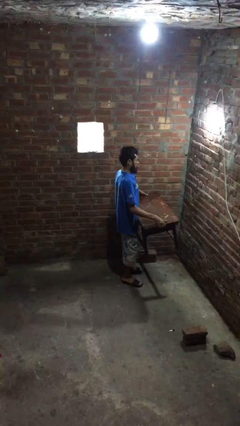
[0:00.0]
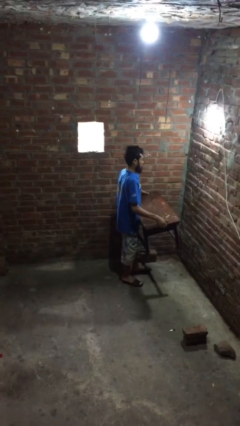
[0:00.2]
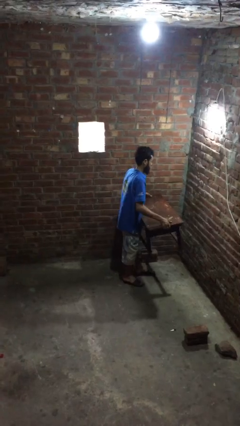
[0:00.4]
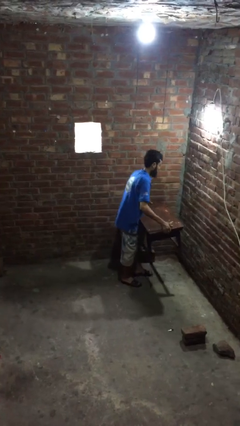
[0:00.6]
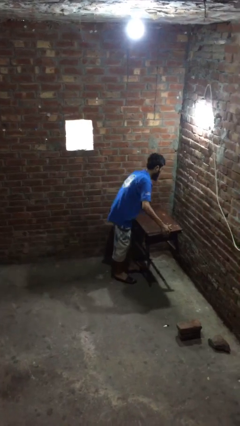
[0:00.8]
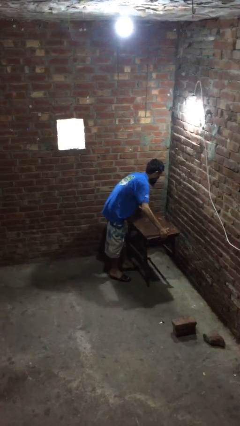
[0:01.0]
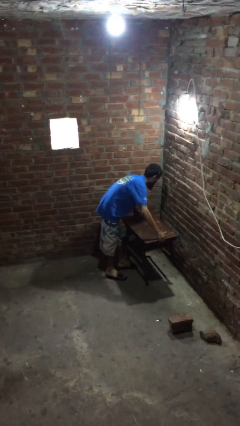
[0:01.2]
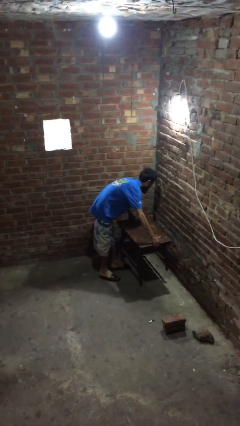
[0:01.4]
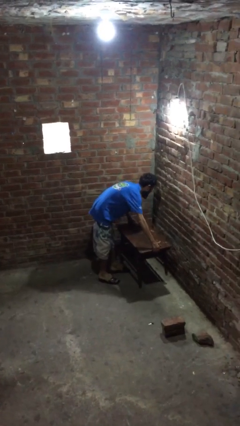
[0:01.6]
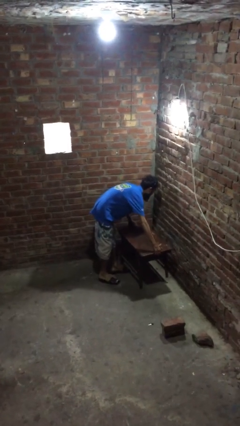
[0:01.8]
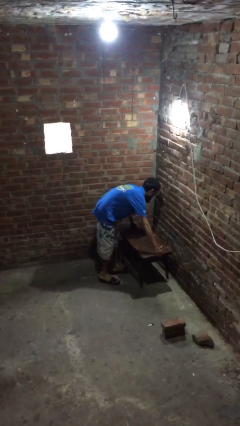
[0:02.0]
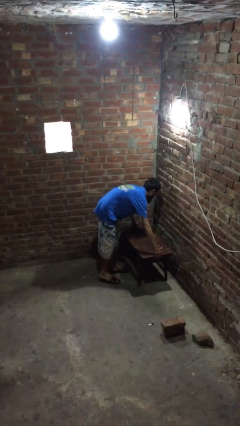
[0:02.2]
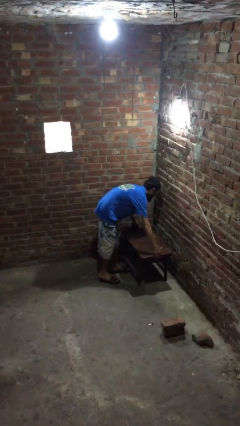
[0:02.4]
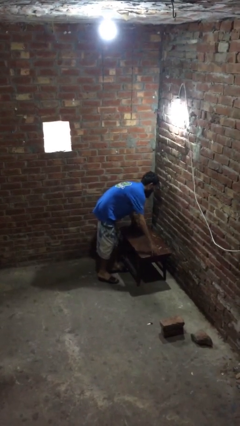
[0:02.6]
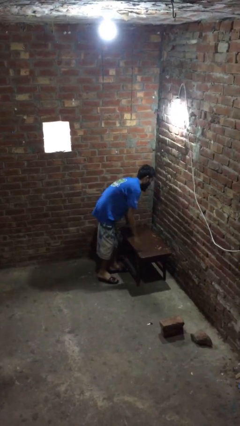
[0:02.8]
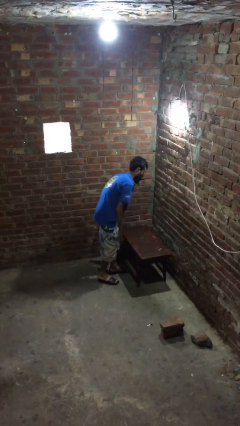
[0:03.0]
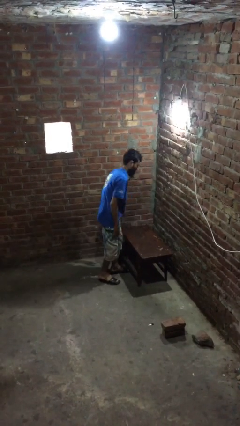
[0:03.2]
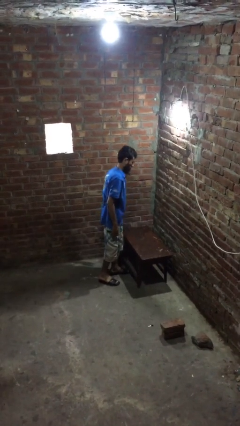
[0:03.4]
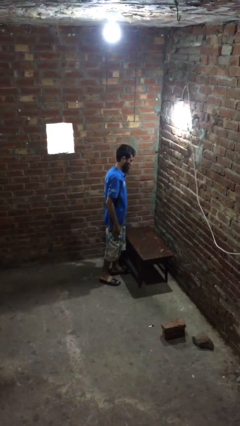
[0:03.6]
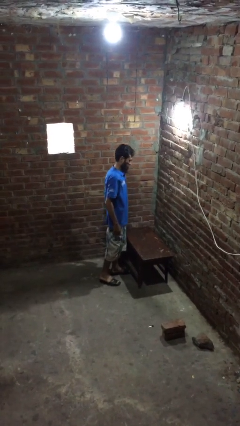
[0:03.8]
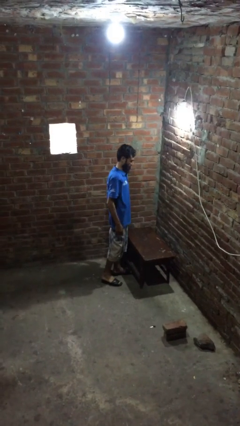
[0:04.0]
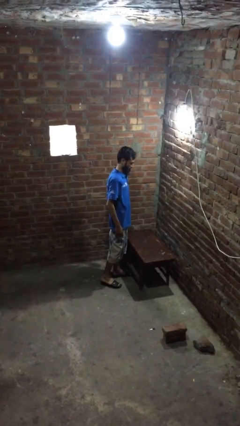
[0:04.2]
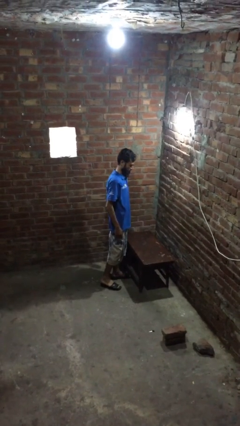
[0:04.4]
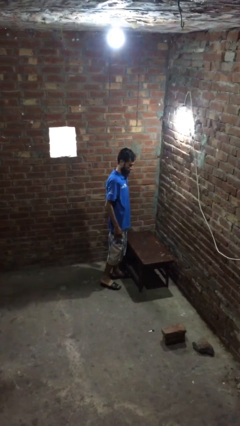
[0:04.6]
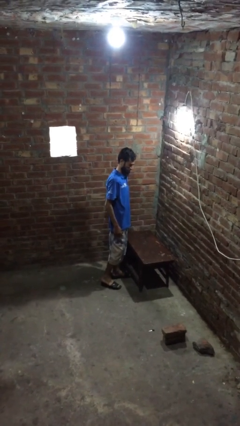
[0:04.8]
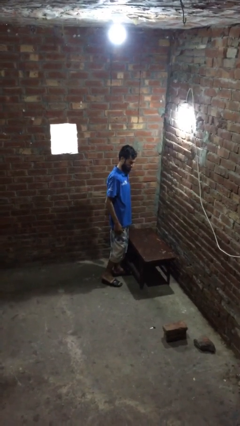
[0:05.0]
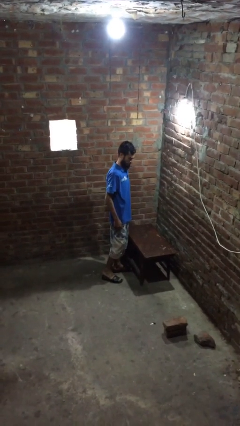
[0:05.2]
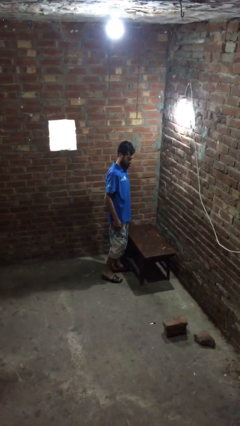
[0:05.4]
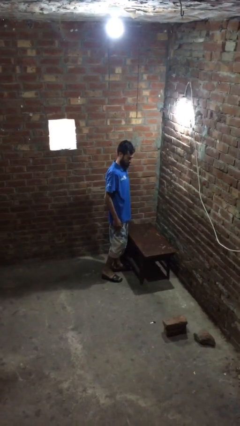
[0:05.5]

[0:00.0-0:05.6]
person puts down object on floor

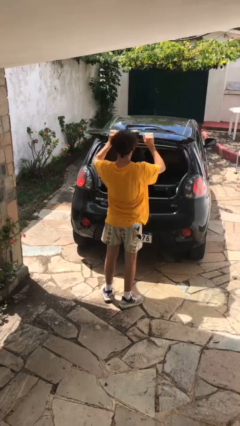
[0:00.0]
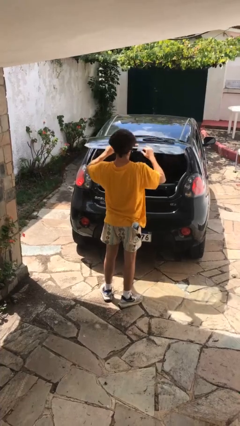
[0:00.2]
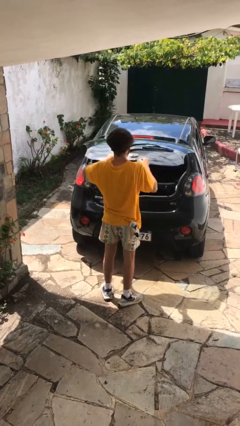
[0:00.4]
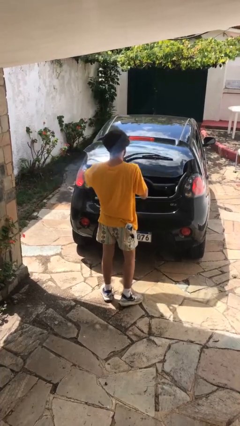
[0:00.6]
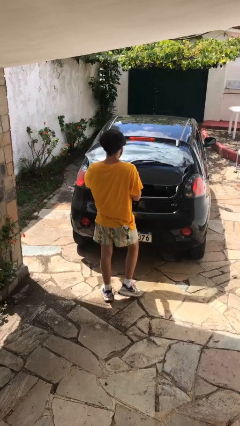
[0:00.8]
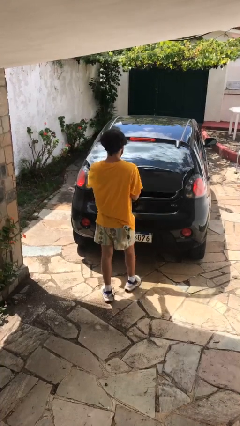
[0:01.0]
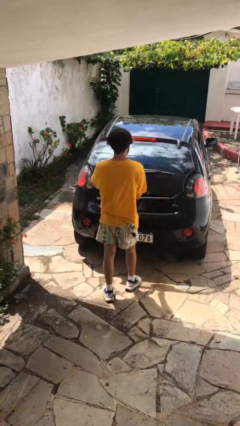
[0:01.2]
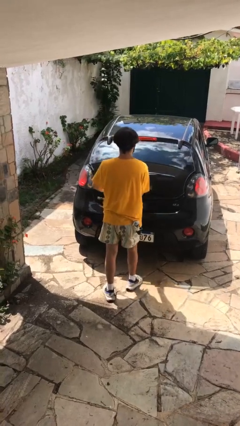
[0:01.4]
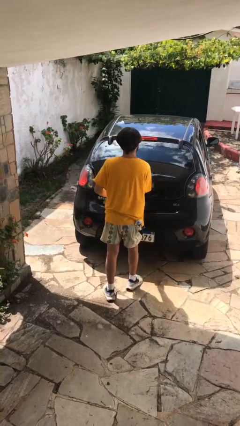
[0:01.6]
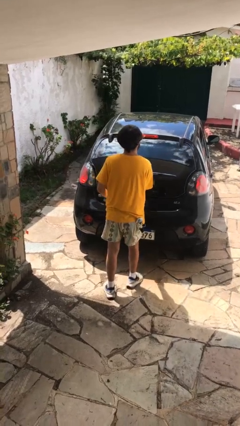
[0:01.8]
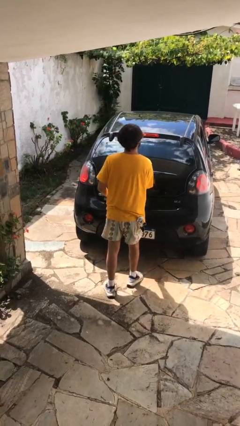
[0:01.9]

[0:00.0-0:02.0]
person closes car trunk

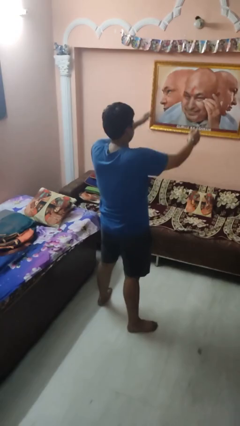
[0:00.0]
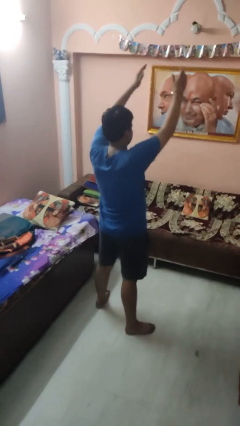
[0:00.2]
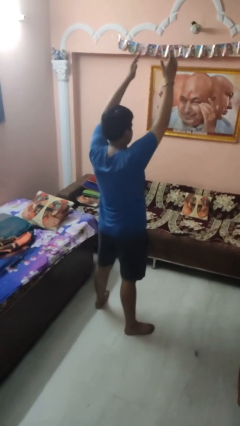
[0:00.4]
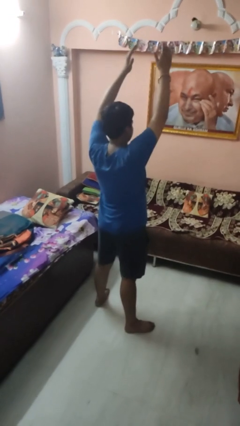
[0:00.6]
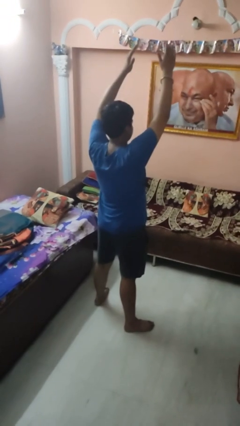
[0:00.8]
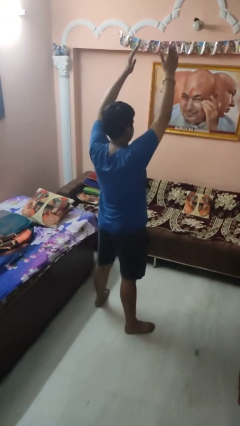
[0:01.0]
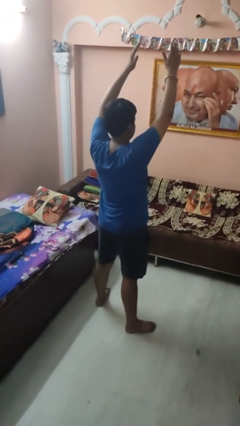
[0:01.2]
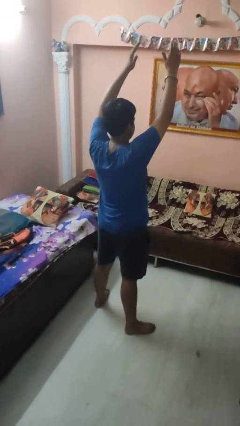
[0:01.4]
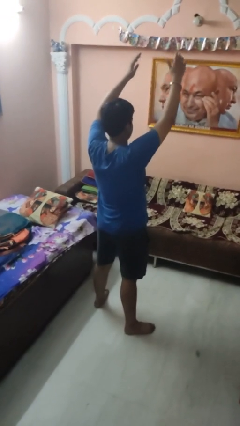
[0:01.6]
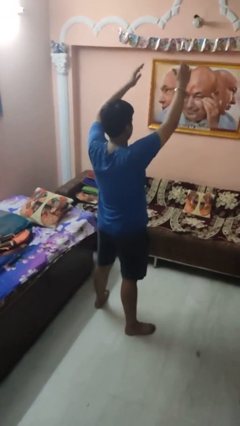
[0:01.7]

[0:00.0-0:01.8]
person stretches arms over head

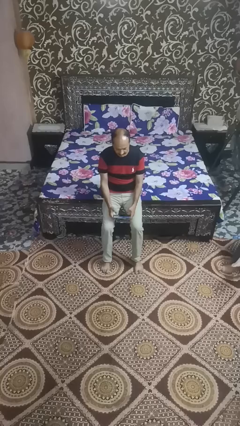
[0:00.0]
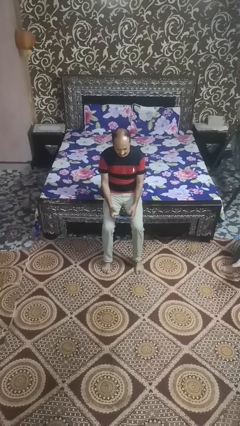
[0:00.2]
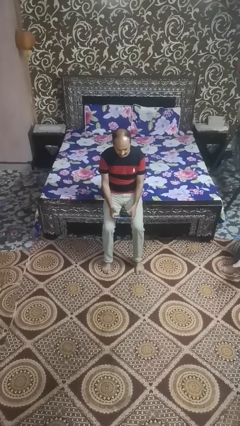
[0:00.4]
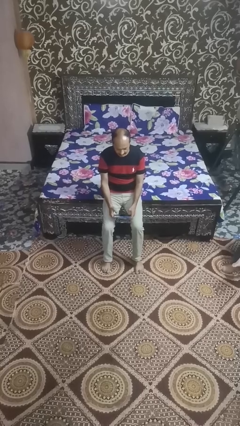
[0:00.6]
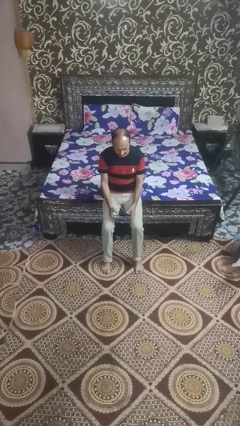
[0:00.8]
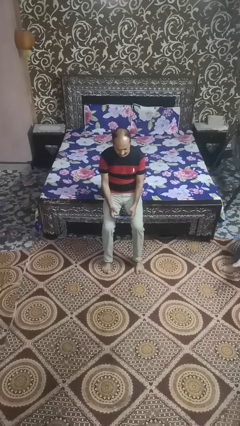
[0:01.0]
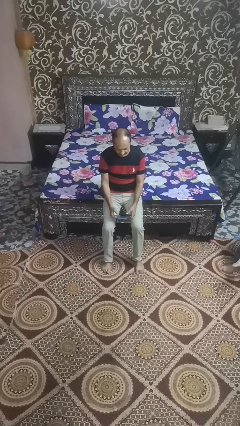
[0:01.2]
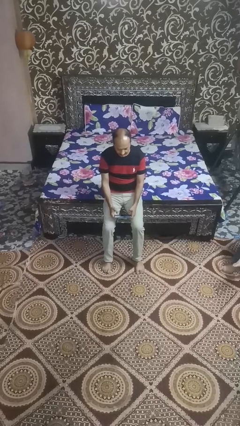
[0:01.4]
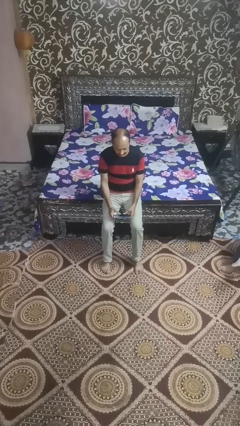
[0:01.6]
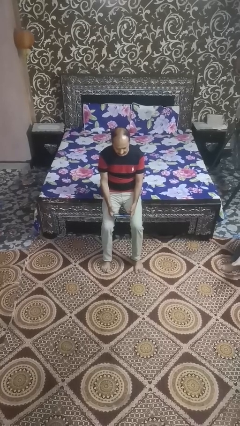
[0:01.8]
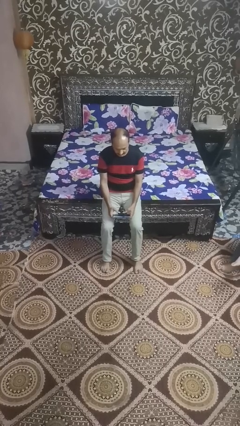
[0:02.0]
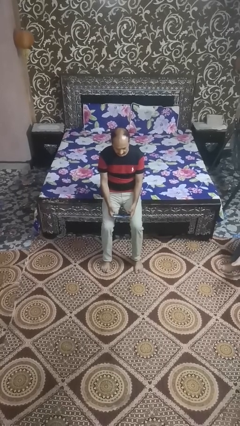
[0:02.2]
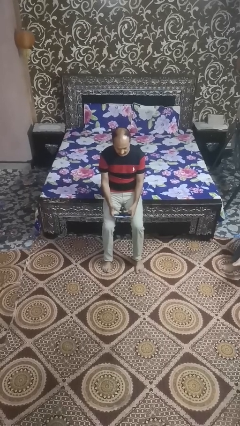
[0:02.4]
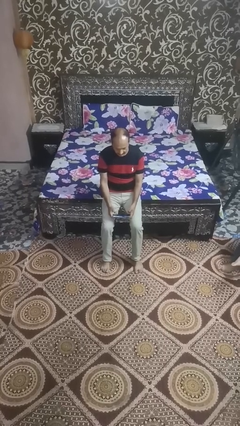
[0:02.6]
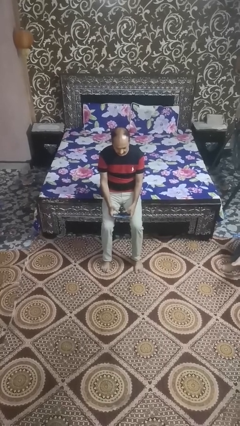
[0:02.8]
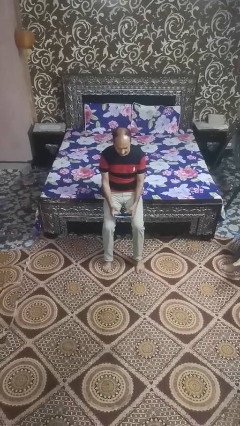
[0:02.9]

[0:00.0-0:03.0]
person interacts with handheld game

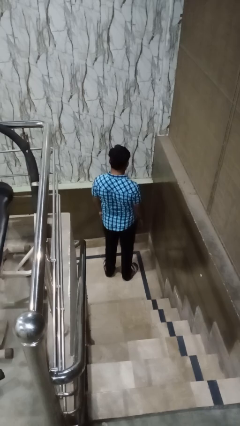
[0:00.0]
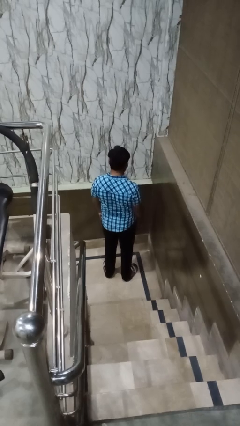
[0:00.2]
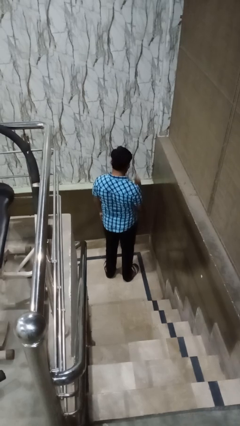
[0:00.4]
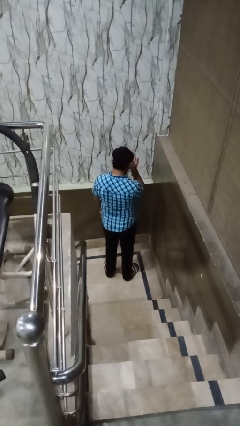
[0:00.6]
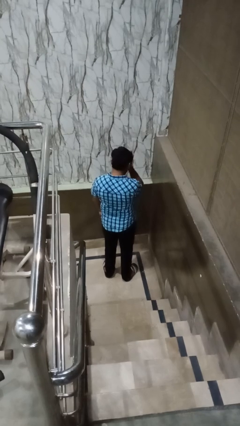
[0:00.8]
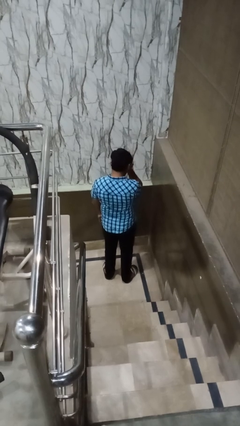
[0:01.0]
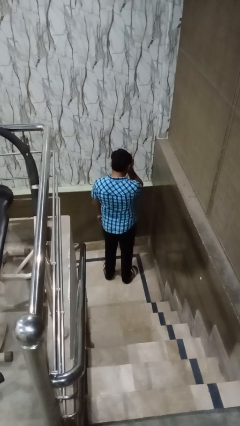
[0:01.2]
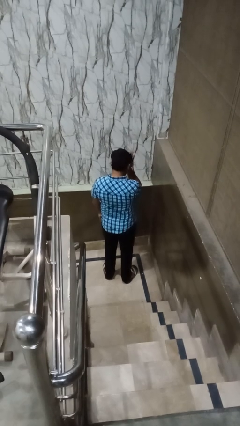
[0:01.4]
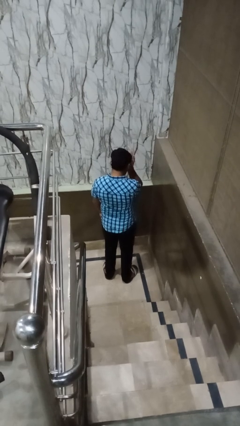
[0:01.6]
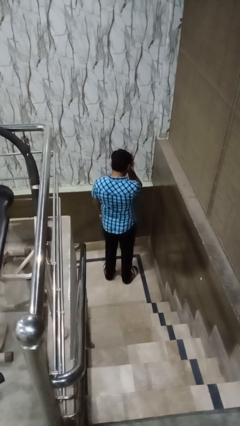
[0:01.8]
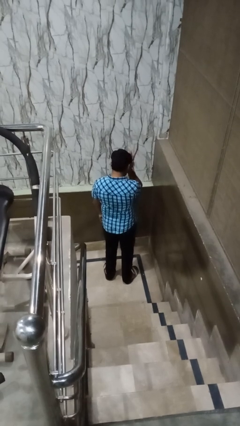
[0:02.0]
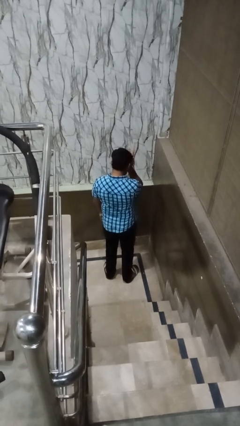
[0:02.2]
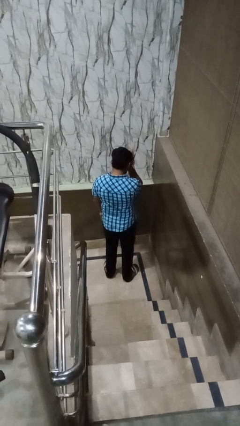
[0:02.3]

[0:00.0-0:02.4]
person shades eyes

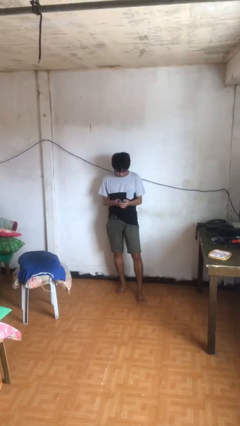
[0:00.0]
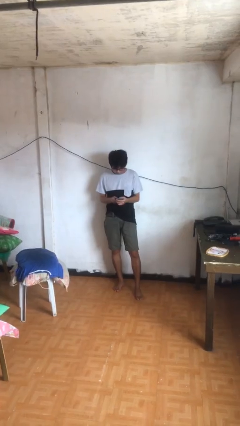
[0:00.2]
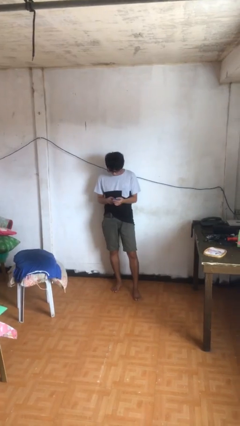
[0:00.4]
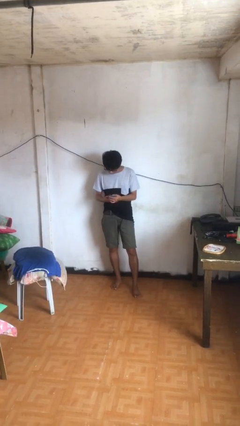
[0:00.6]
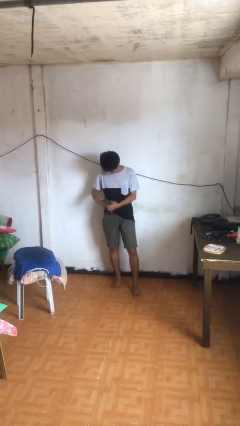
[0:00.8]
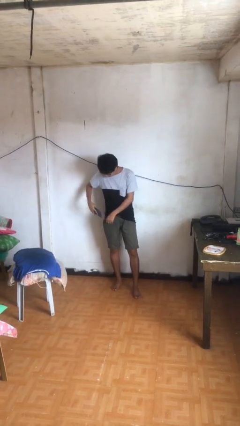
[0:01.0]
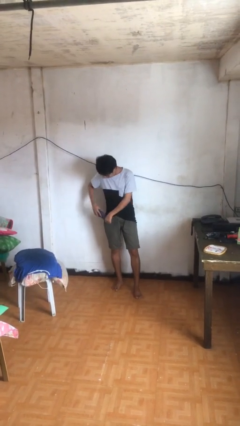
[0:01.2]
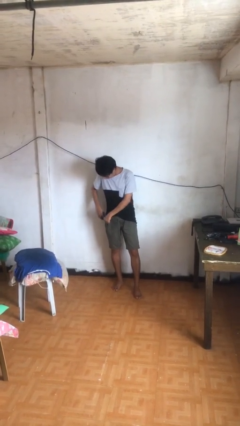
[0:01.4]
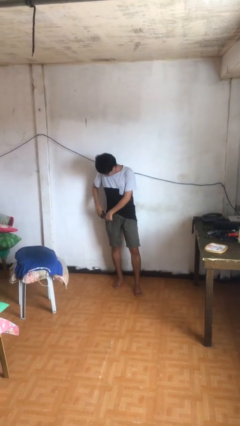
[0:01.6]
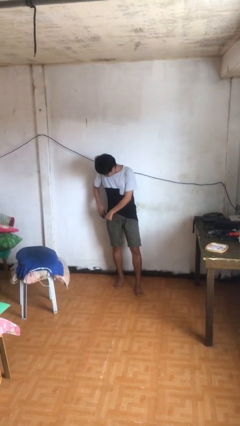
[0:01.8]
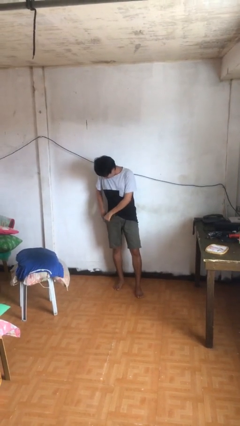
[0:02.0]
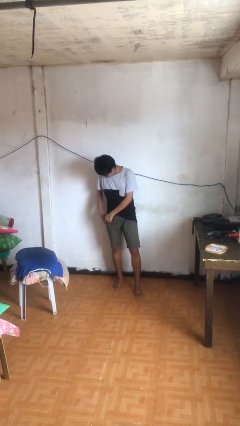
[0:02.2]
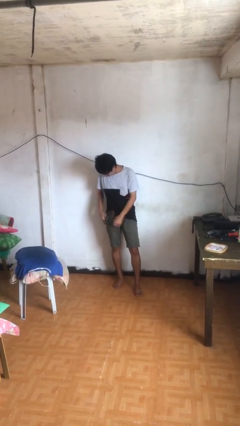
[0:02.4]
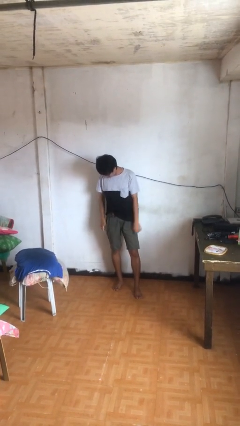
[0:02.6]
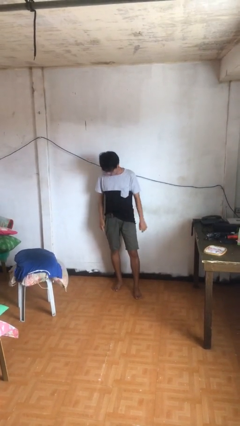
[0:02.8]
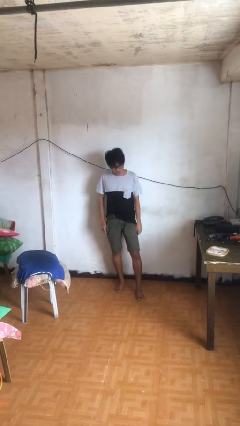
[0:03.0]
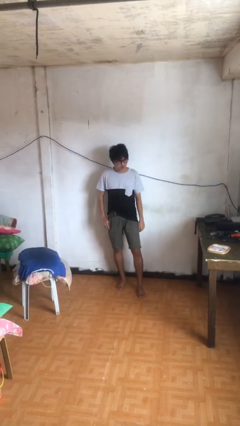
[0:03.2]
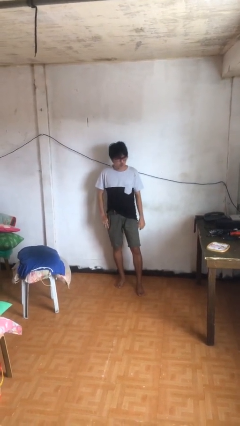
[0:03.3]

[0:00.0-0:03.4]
person puts phone into pocket
